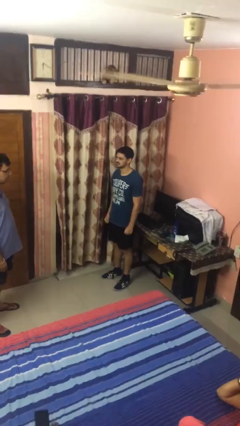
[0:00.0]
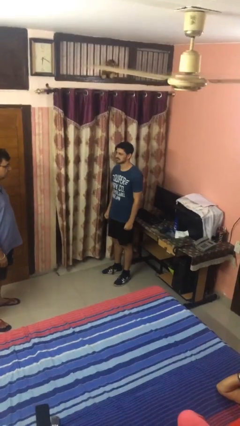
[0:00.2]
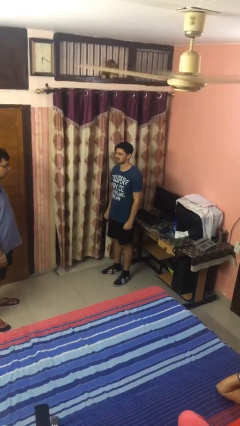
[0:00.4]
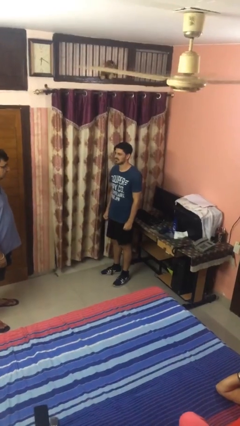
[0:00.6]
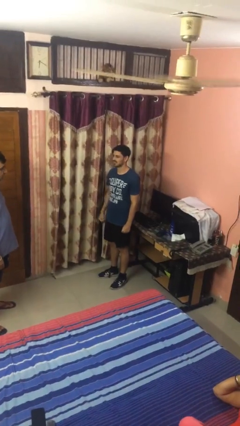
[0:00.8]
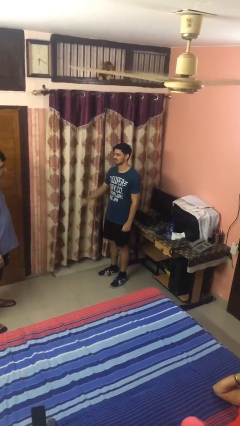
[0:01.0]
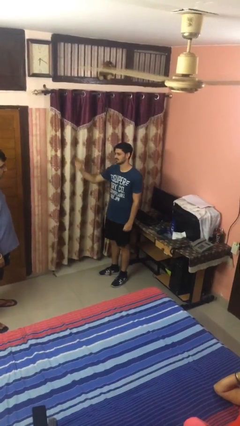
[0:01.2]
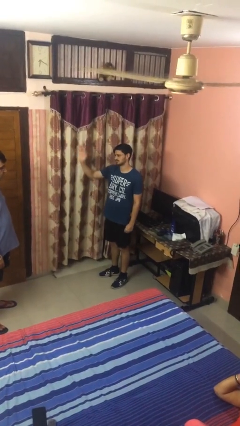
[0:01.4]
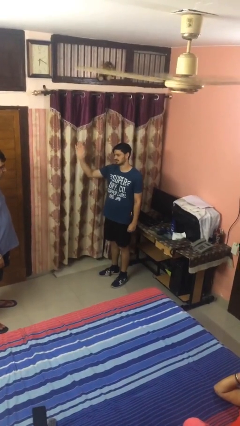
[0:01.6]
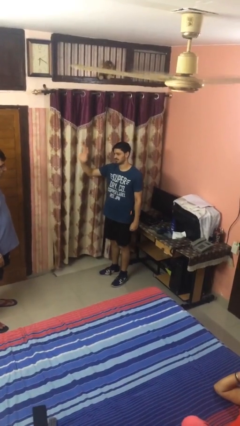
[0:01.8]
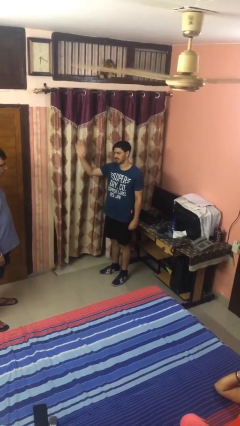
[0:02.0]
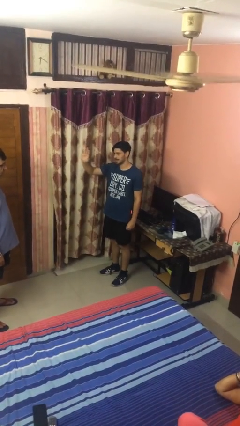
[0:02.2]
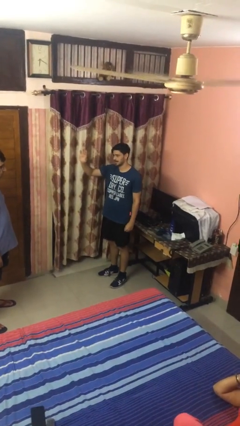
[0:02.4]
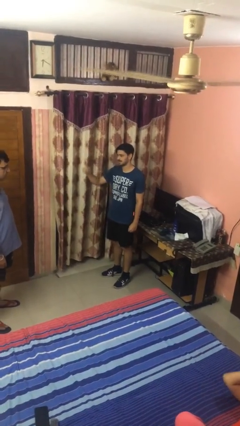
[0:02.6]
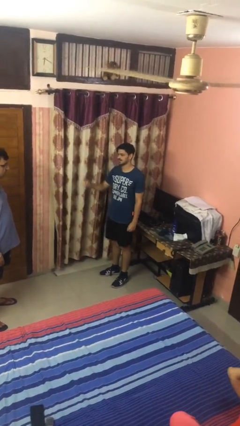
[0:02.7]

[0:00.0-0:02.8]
person waves at person

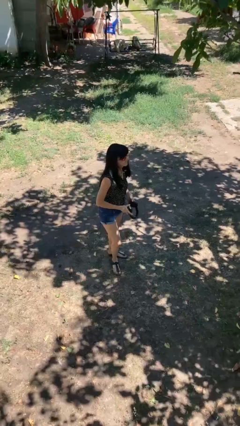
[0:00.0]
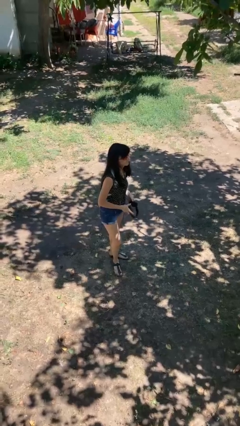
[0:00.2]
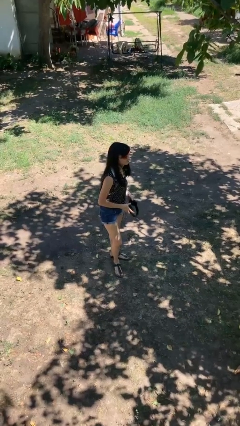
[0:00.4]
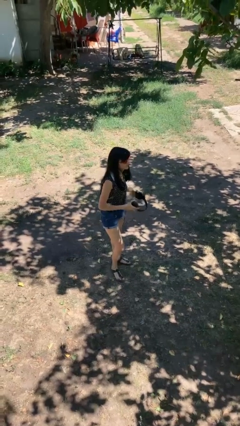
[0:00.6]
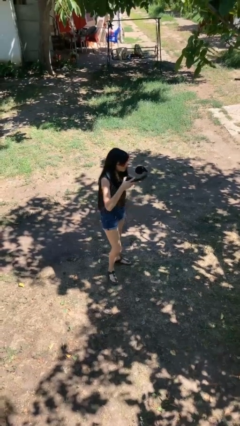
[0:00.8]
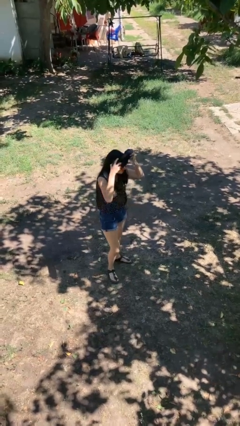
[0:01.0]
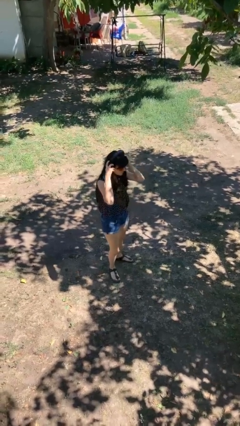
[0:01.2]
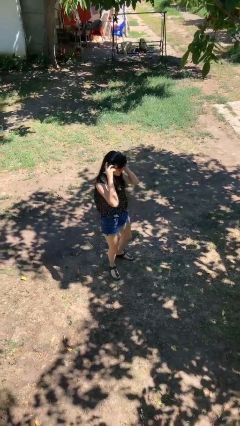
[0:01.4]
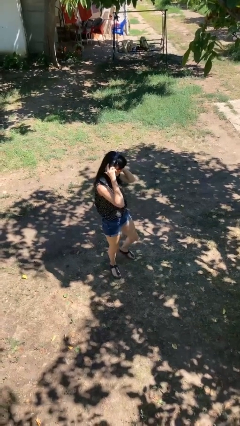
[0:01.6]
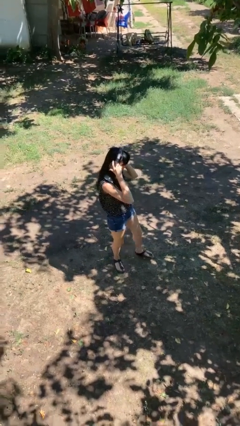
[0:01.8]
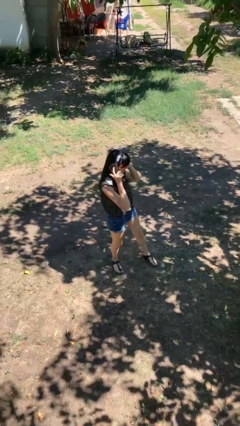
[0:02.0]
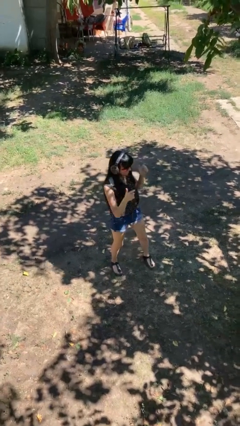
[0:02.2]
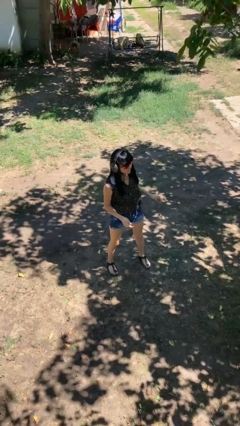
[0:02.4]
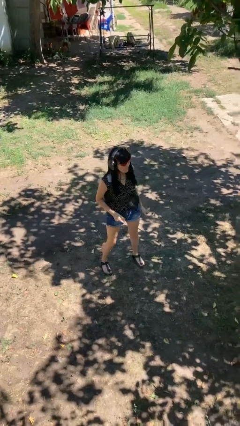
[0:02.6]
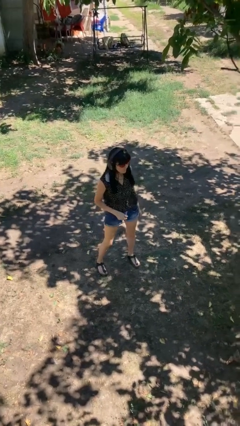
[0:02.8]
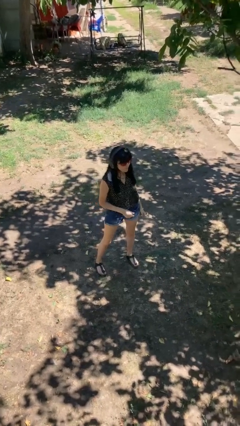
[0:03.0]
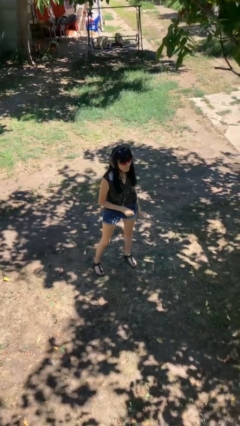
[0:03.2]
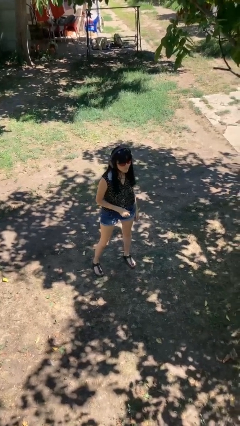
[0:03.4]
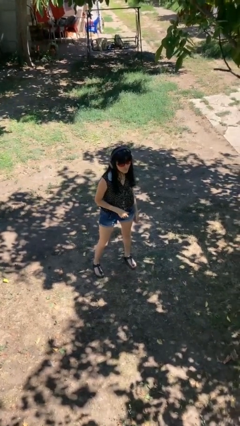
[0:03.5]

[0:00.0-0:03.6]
person puts on headphones

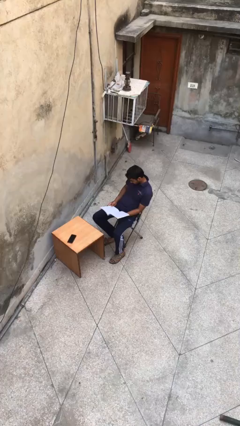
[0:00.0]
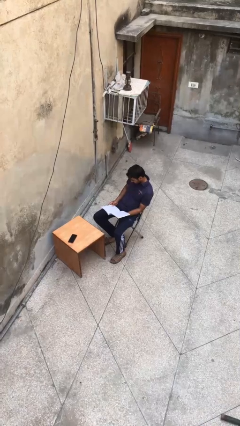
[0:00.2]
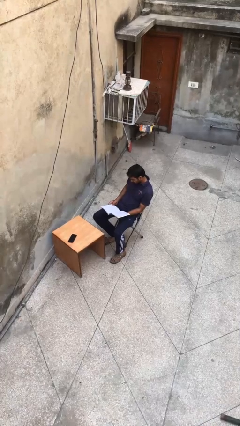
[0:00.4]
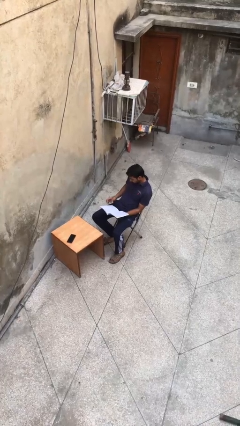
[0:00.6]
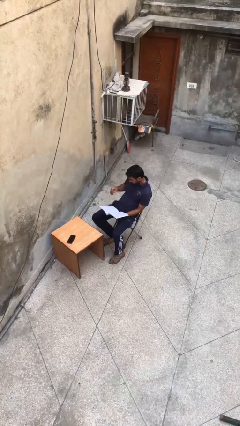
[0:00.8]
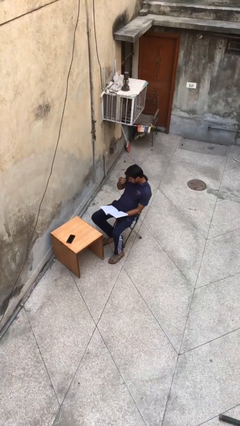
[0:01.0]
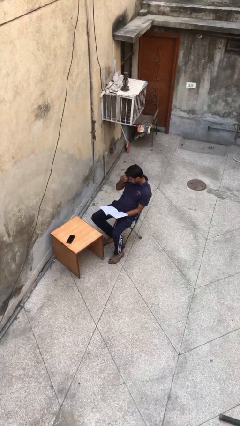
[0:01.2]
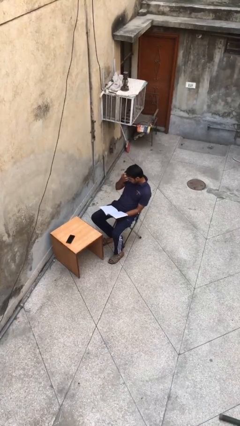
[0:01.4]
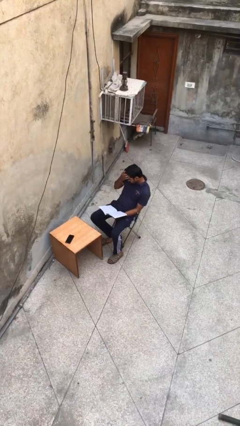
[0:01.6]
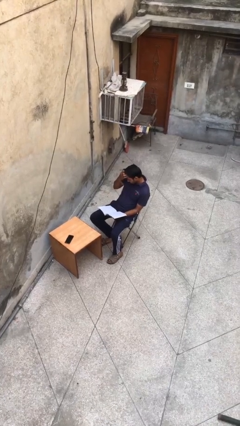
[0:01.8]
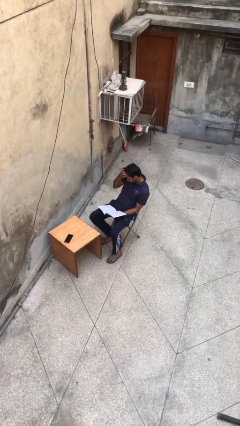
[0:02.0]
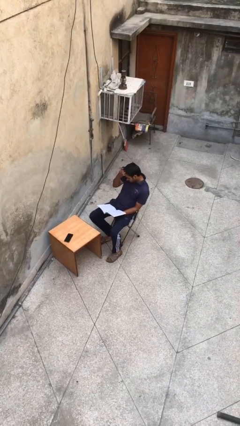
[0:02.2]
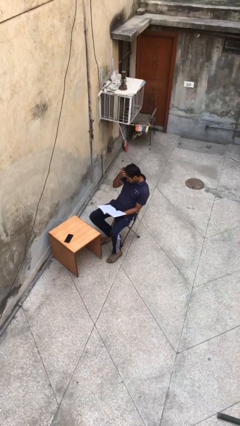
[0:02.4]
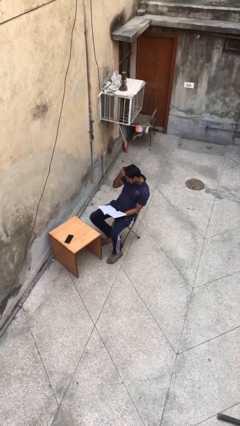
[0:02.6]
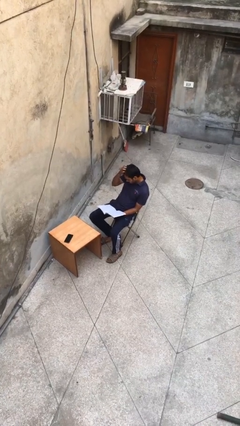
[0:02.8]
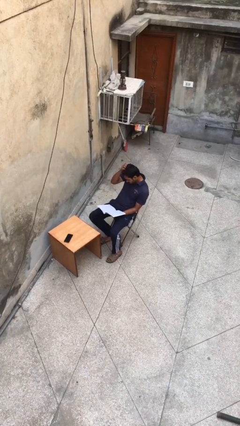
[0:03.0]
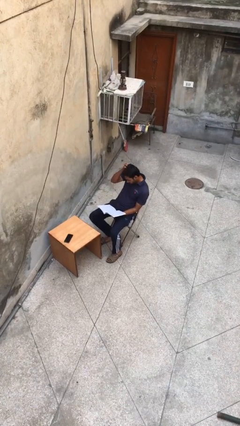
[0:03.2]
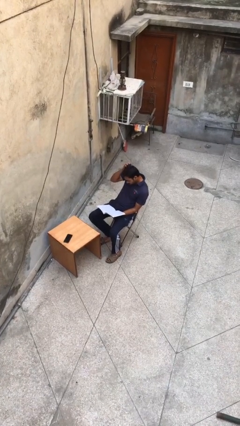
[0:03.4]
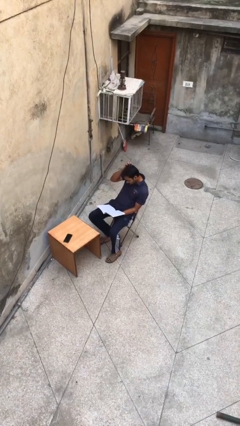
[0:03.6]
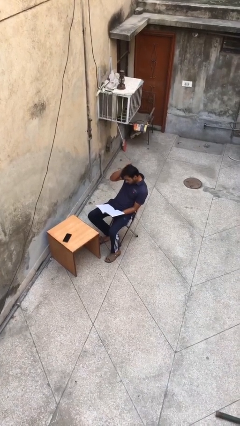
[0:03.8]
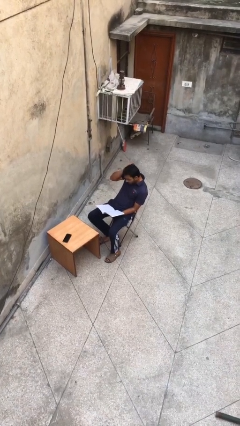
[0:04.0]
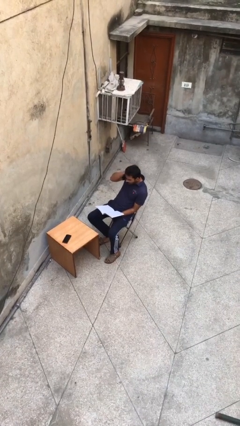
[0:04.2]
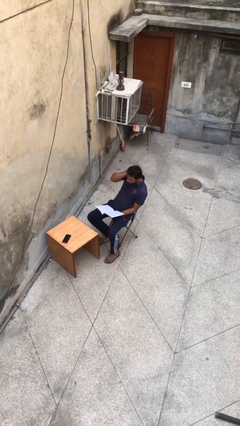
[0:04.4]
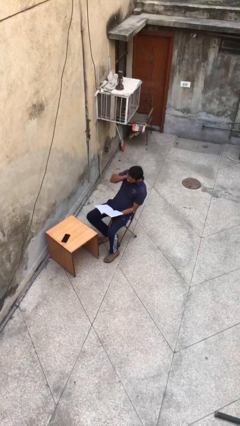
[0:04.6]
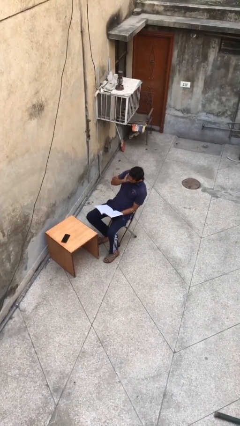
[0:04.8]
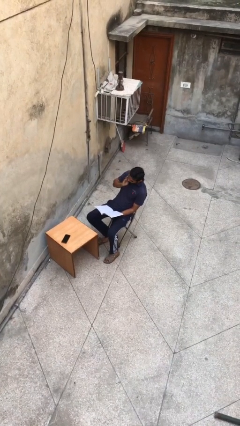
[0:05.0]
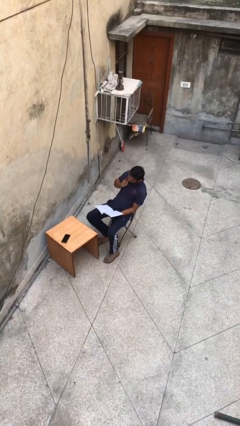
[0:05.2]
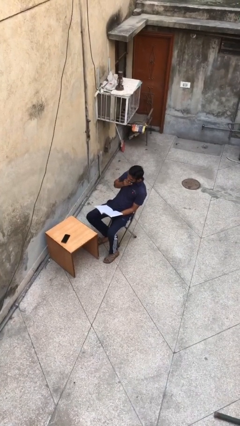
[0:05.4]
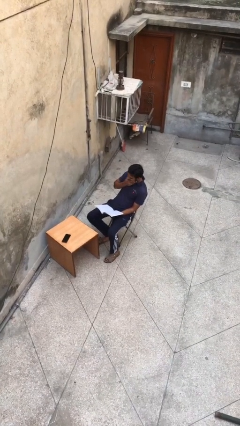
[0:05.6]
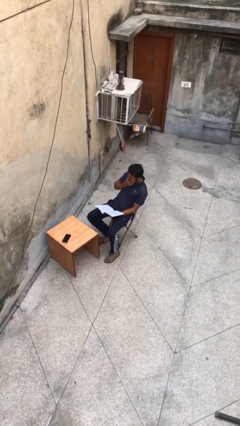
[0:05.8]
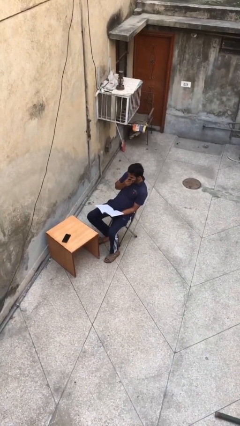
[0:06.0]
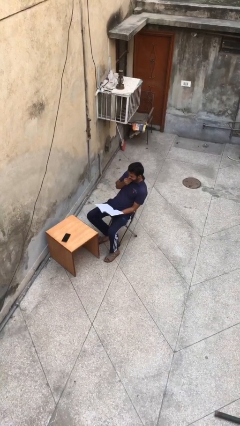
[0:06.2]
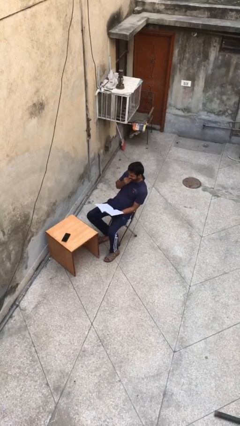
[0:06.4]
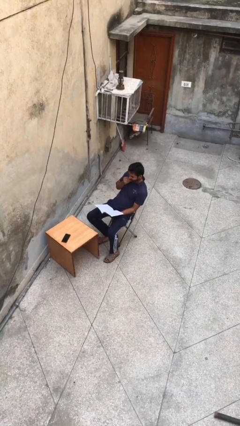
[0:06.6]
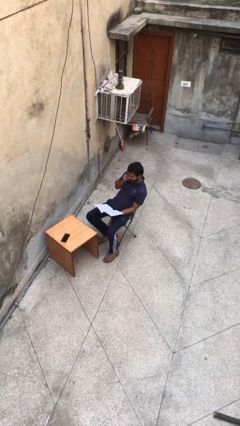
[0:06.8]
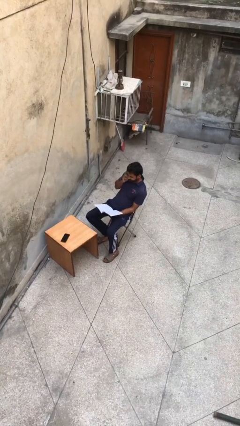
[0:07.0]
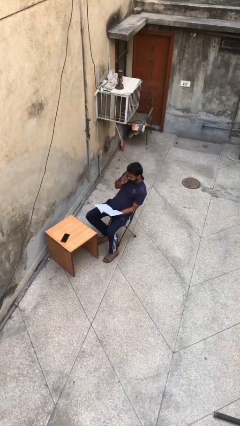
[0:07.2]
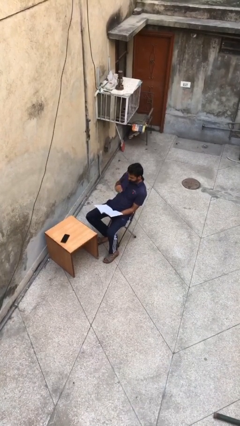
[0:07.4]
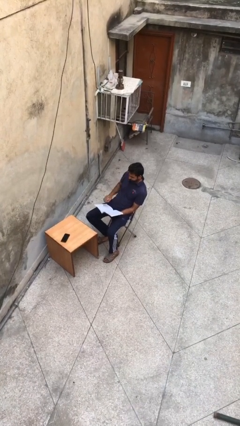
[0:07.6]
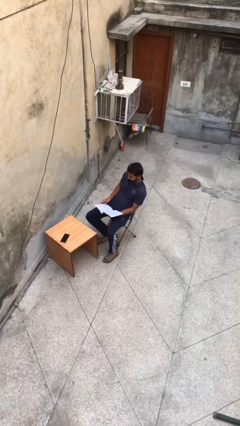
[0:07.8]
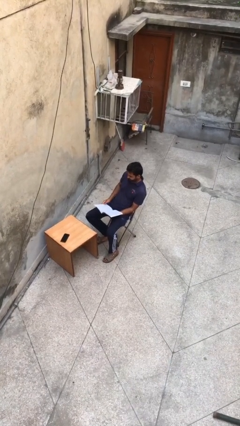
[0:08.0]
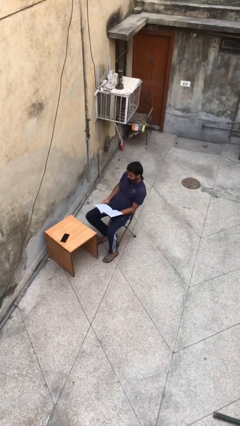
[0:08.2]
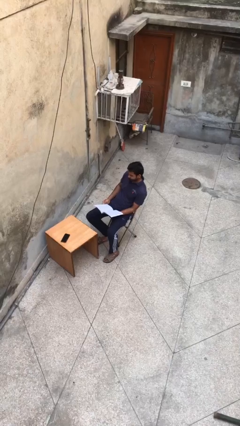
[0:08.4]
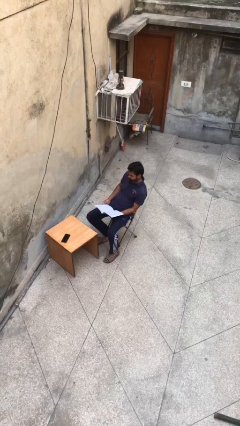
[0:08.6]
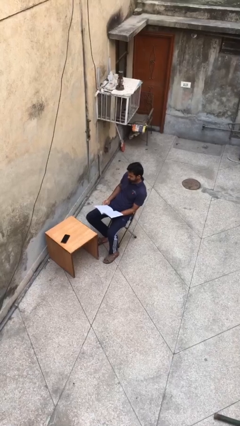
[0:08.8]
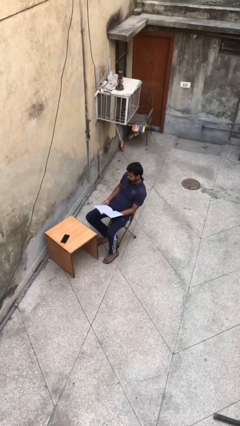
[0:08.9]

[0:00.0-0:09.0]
person reads document

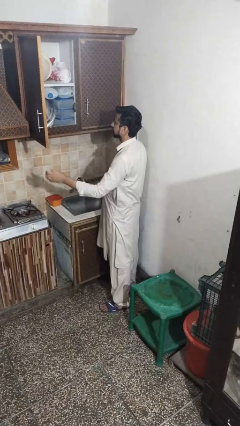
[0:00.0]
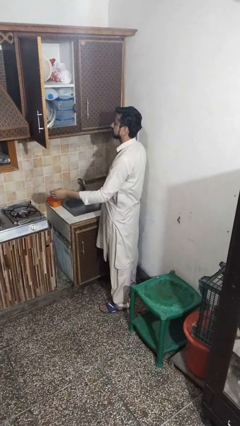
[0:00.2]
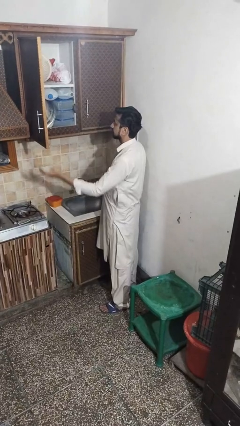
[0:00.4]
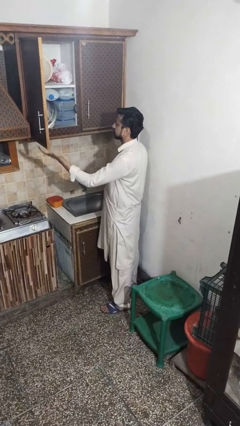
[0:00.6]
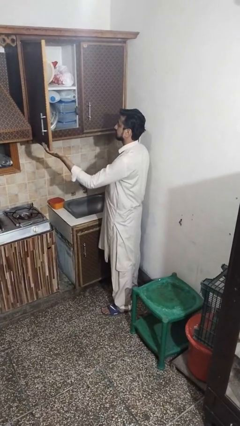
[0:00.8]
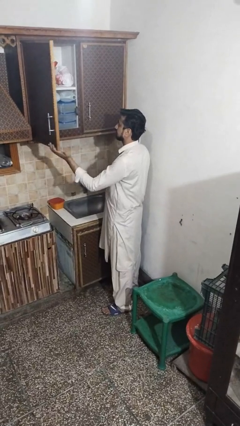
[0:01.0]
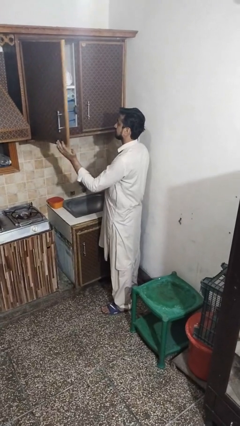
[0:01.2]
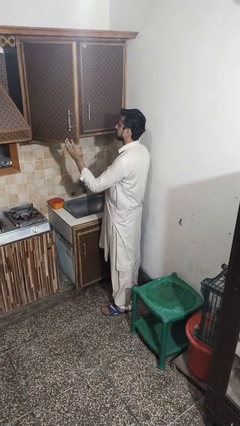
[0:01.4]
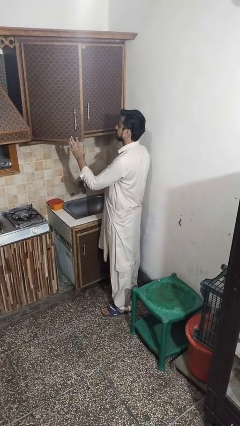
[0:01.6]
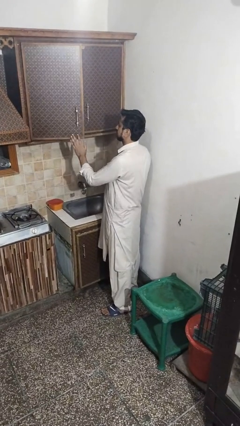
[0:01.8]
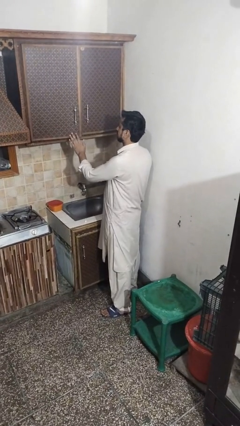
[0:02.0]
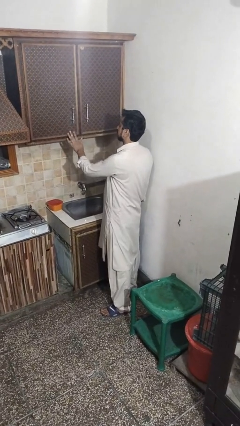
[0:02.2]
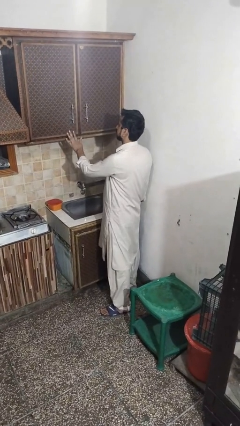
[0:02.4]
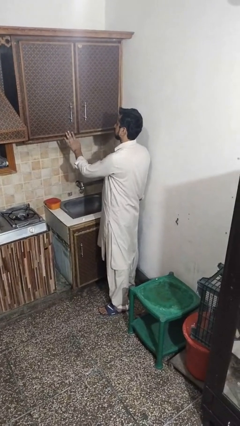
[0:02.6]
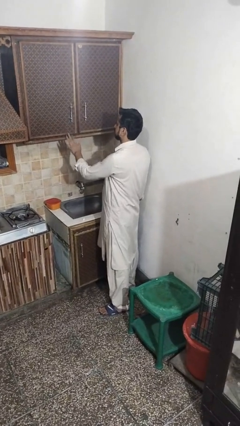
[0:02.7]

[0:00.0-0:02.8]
person closes cabinet
